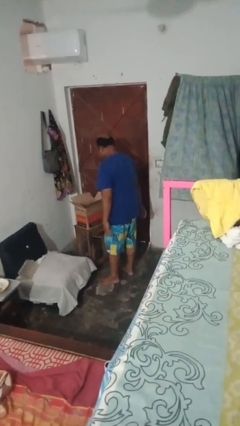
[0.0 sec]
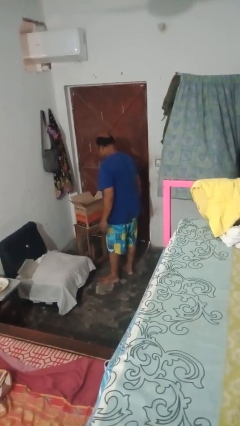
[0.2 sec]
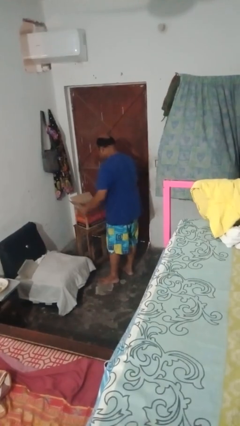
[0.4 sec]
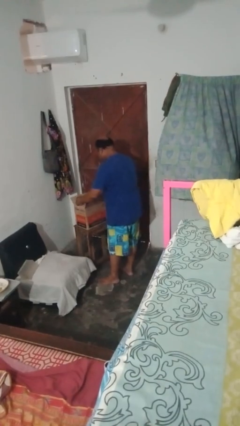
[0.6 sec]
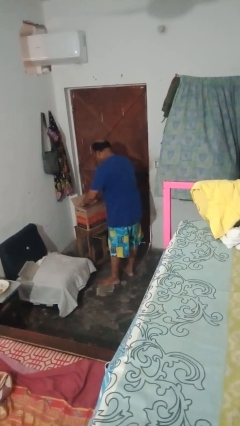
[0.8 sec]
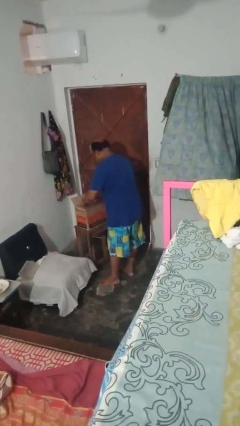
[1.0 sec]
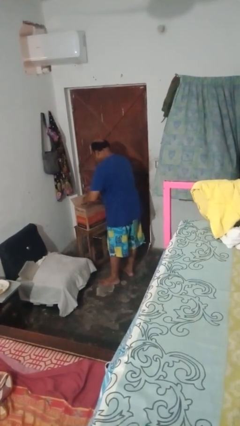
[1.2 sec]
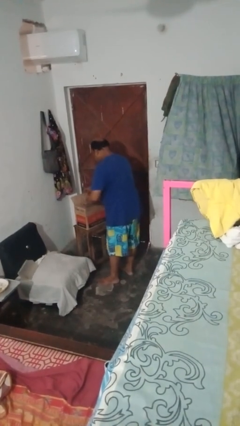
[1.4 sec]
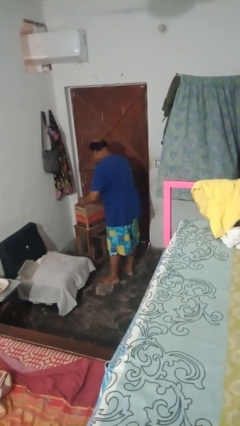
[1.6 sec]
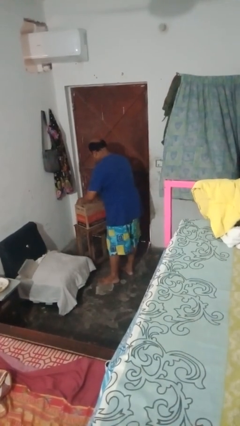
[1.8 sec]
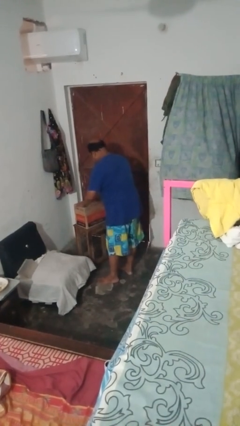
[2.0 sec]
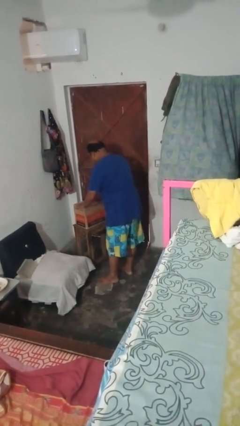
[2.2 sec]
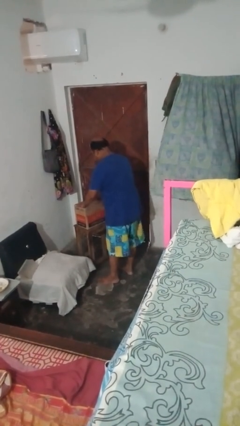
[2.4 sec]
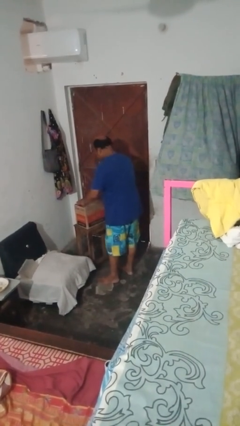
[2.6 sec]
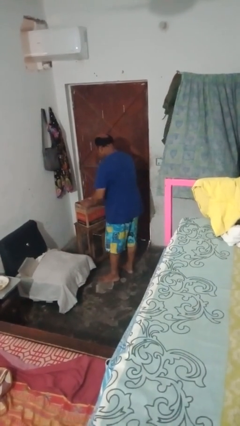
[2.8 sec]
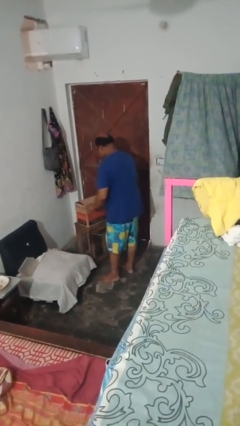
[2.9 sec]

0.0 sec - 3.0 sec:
person closes box

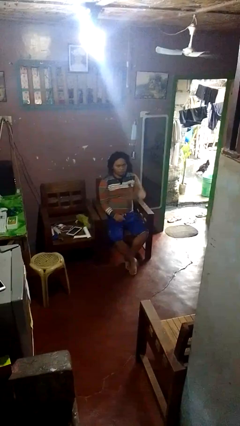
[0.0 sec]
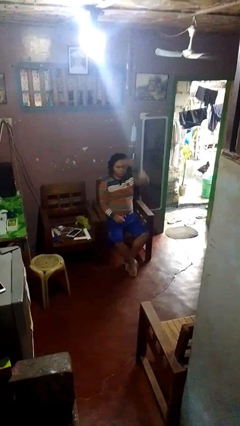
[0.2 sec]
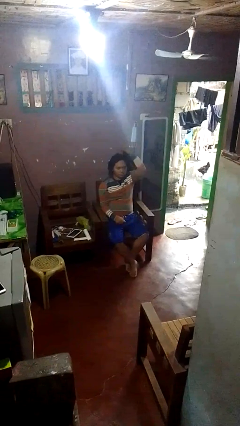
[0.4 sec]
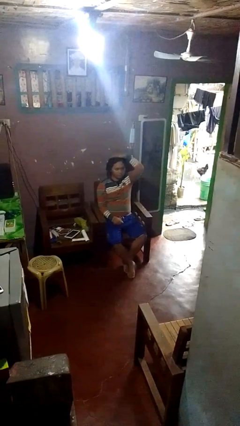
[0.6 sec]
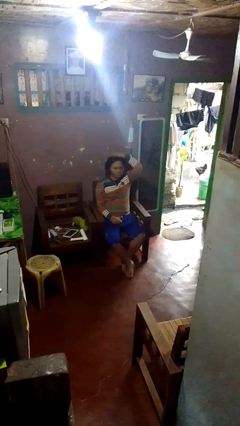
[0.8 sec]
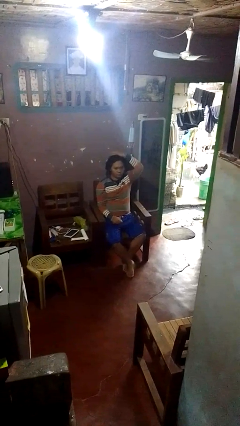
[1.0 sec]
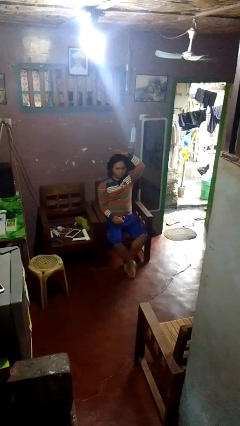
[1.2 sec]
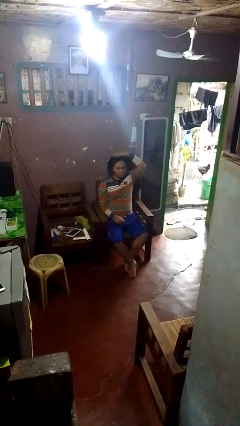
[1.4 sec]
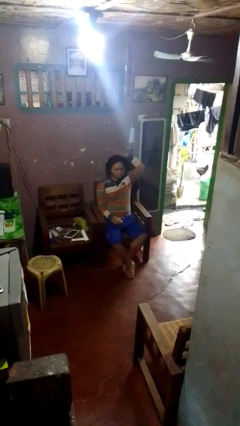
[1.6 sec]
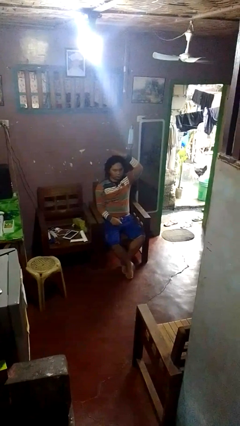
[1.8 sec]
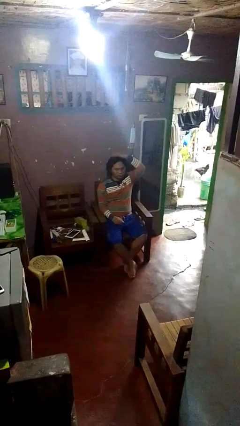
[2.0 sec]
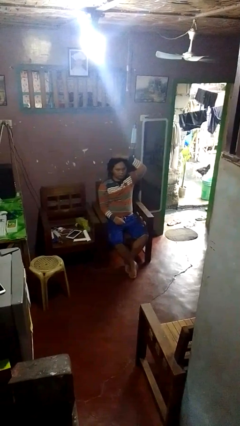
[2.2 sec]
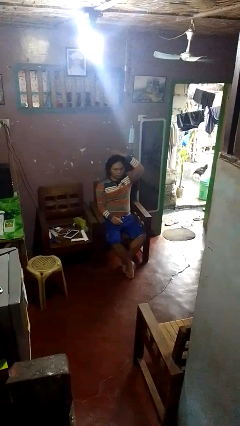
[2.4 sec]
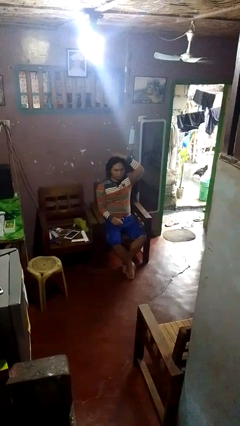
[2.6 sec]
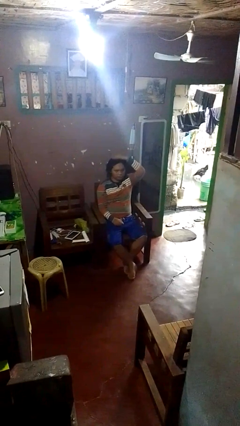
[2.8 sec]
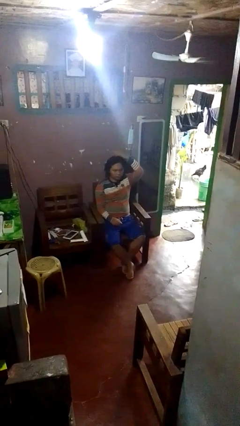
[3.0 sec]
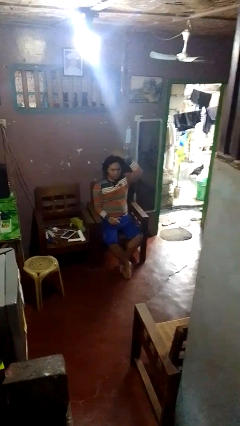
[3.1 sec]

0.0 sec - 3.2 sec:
person pats head

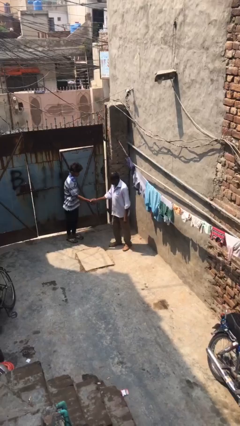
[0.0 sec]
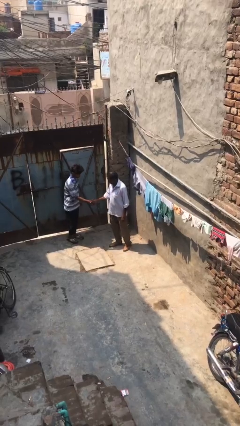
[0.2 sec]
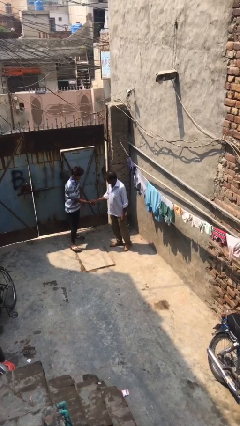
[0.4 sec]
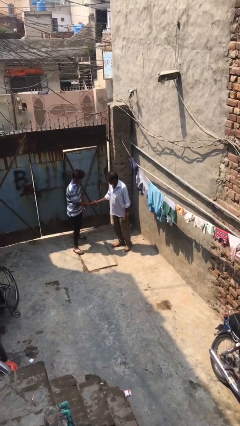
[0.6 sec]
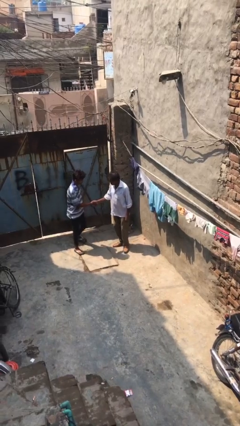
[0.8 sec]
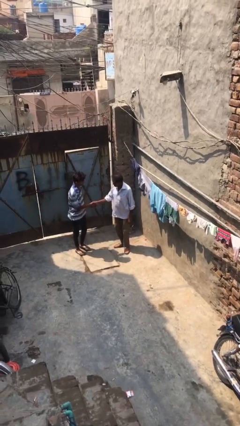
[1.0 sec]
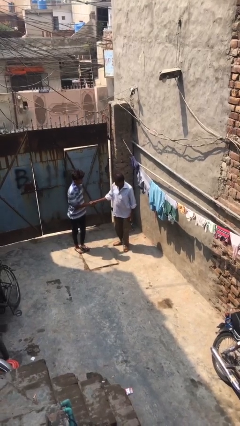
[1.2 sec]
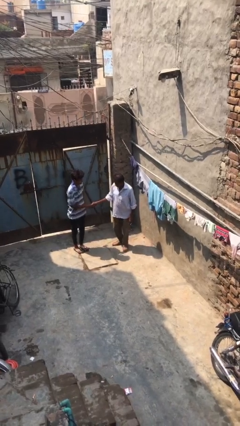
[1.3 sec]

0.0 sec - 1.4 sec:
person shakes hand

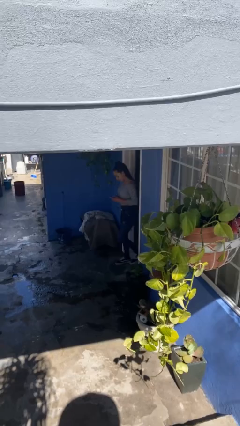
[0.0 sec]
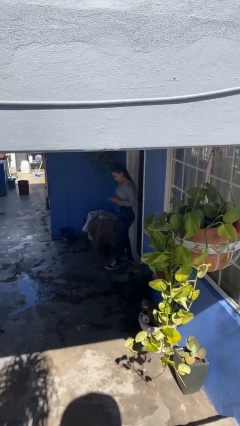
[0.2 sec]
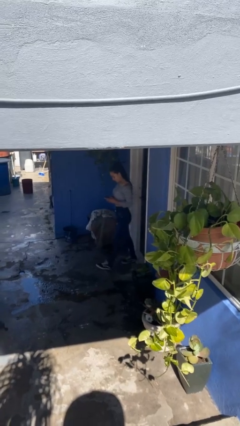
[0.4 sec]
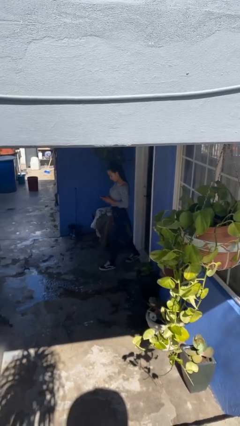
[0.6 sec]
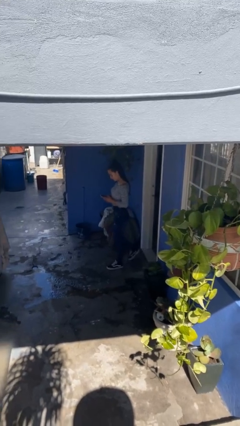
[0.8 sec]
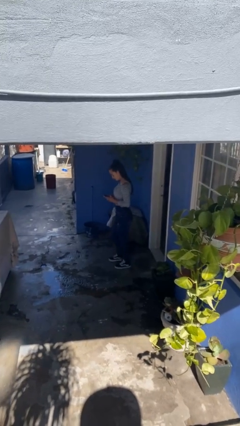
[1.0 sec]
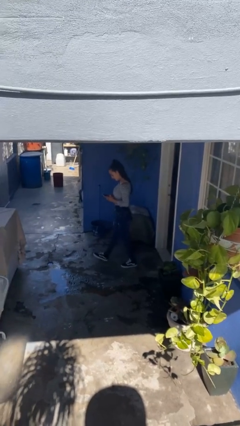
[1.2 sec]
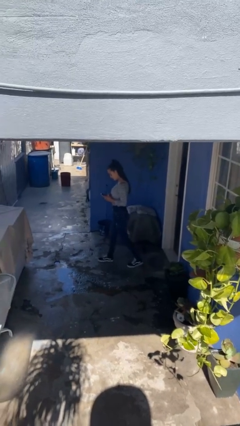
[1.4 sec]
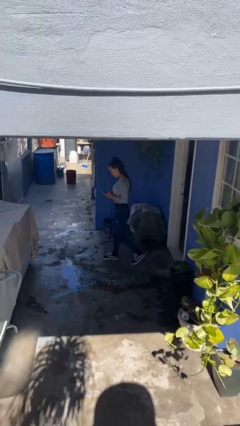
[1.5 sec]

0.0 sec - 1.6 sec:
person enters scene through structure

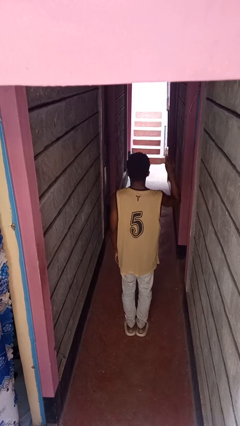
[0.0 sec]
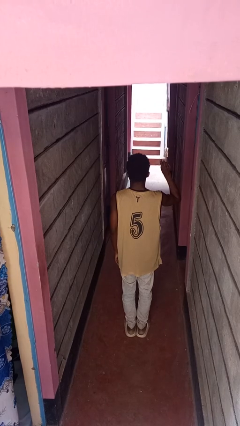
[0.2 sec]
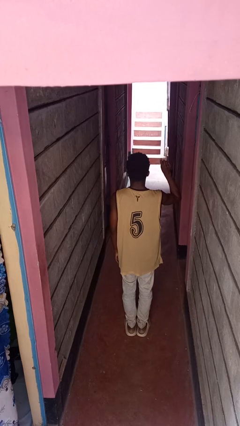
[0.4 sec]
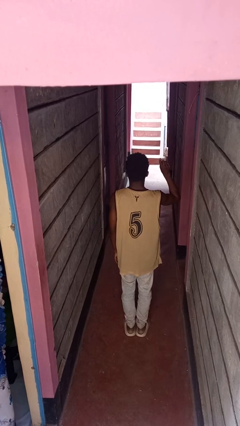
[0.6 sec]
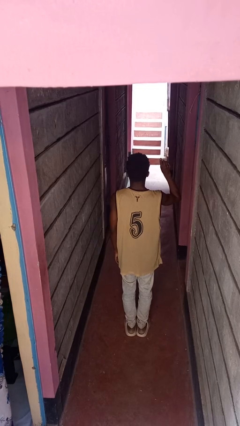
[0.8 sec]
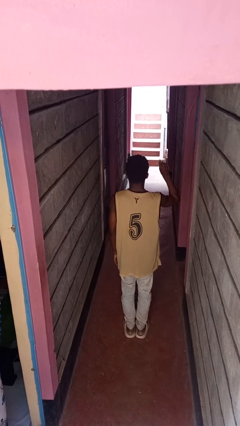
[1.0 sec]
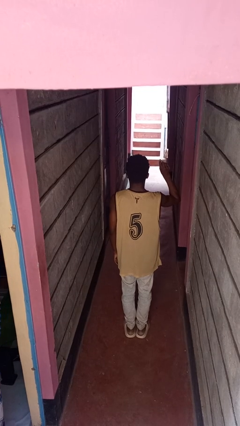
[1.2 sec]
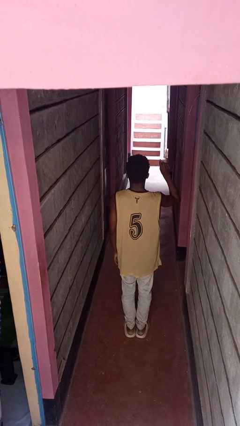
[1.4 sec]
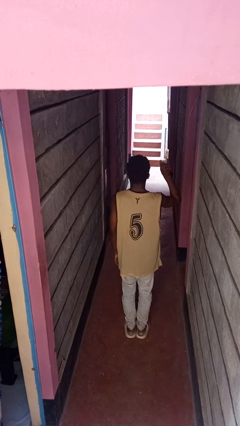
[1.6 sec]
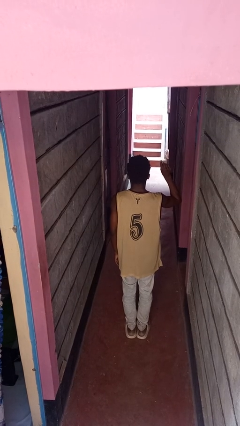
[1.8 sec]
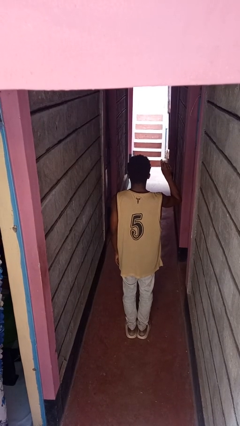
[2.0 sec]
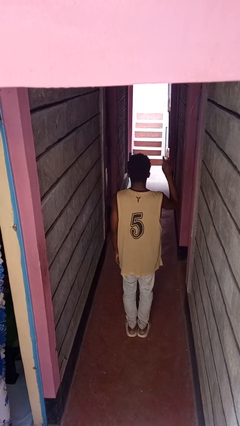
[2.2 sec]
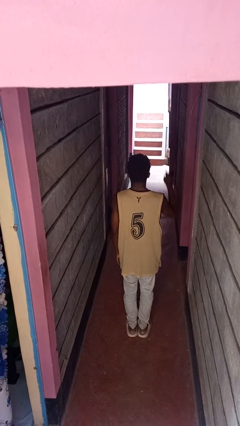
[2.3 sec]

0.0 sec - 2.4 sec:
person gestures number one

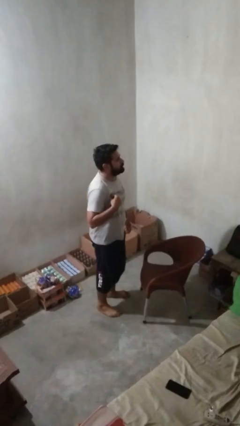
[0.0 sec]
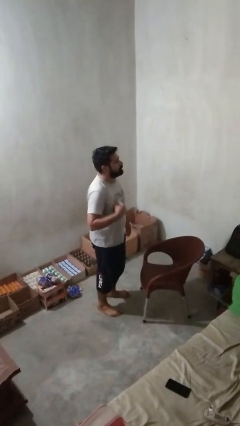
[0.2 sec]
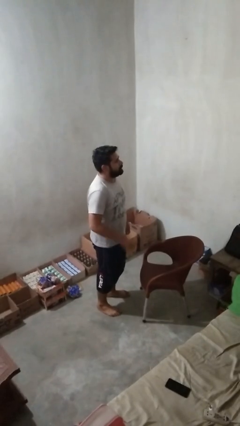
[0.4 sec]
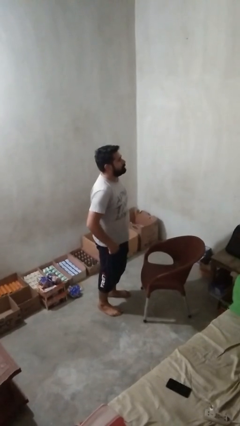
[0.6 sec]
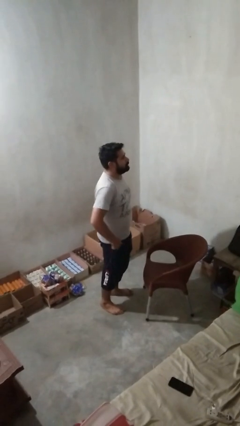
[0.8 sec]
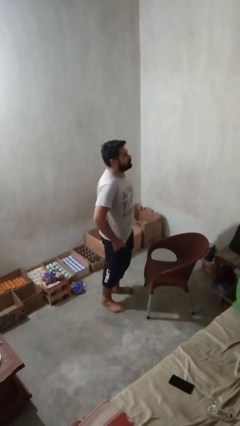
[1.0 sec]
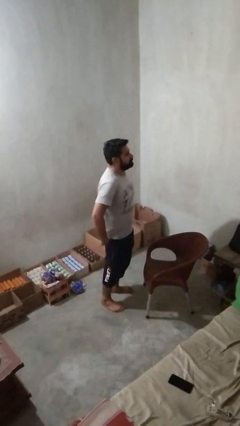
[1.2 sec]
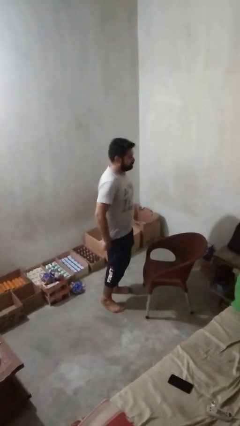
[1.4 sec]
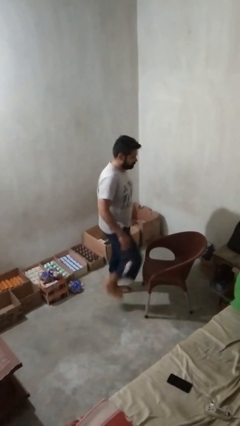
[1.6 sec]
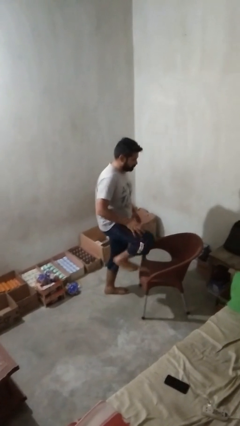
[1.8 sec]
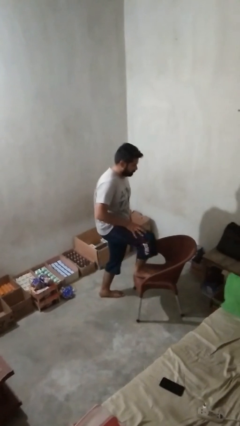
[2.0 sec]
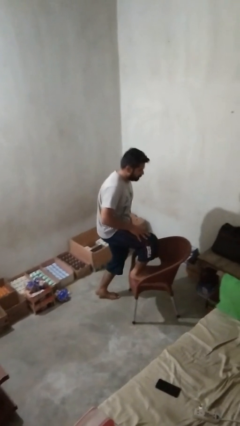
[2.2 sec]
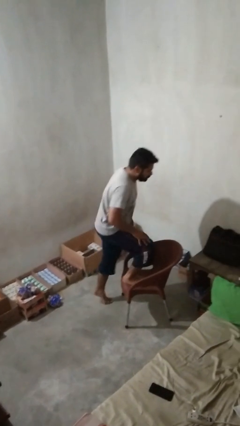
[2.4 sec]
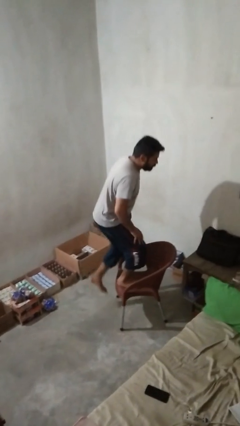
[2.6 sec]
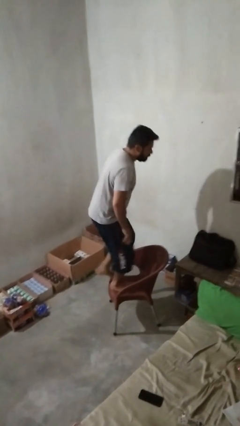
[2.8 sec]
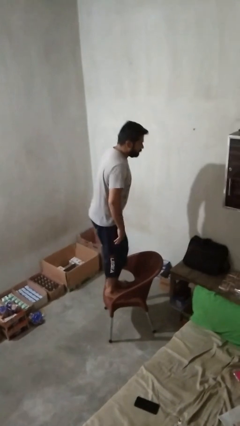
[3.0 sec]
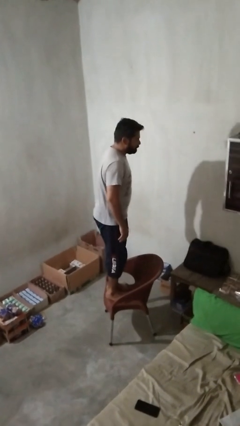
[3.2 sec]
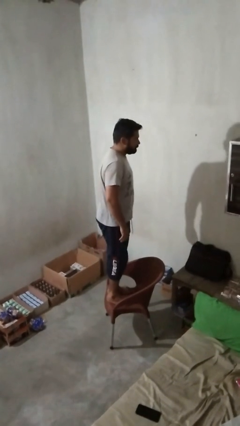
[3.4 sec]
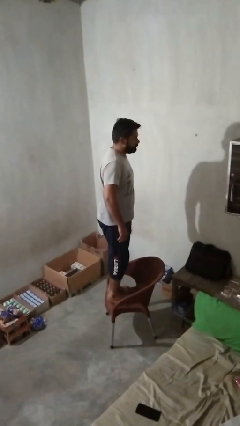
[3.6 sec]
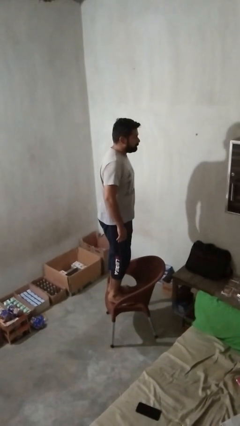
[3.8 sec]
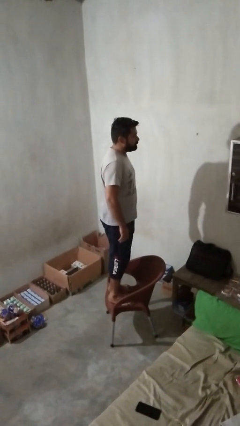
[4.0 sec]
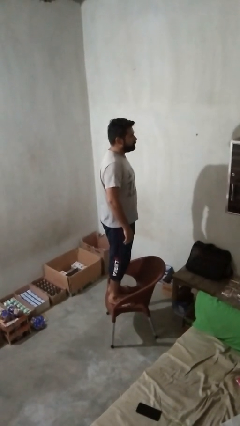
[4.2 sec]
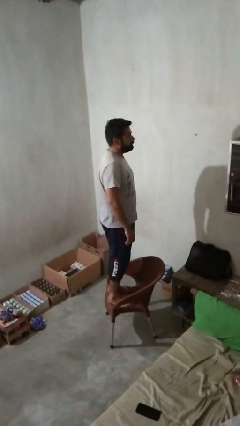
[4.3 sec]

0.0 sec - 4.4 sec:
person climbs on chair

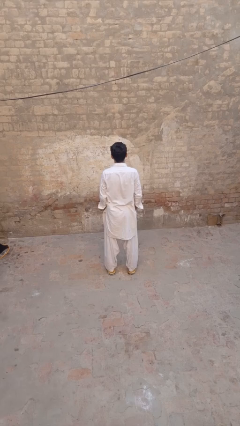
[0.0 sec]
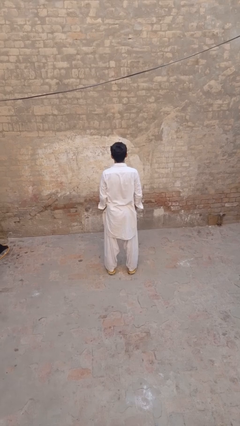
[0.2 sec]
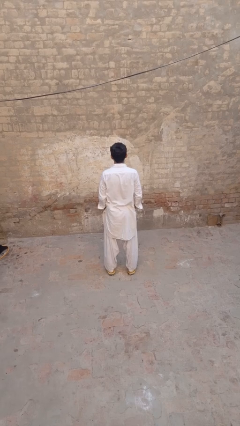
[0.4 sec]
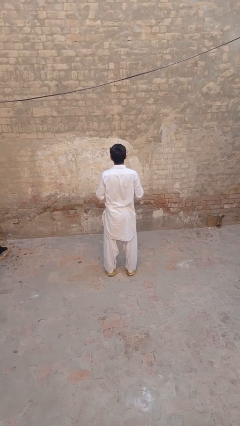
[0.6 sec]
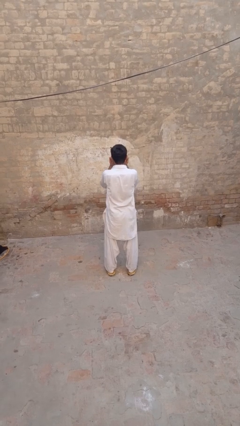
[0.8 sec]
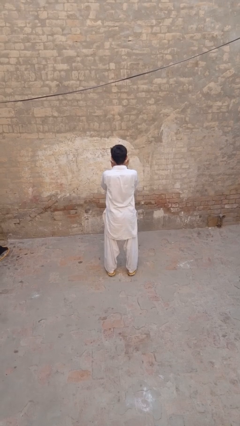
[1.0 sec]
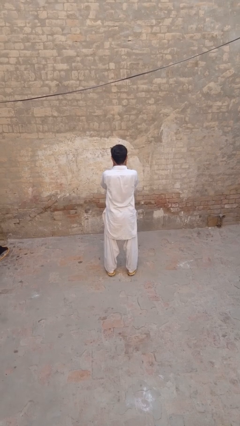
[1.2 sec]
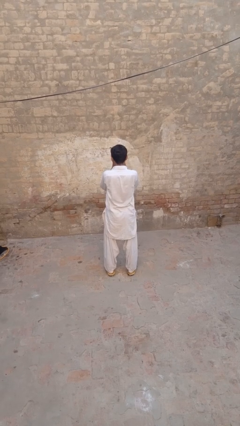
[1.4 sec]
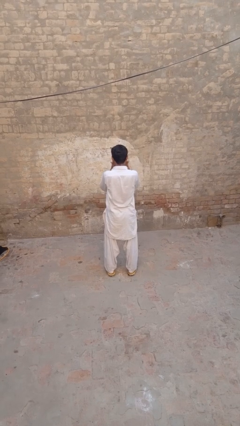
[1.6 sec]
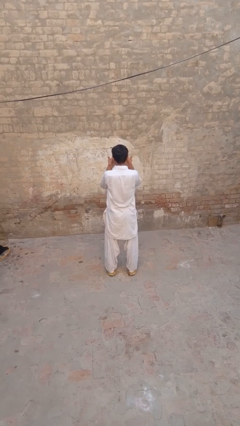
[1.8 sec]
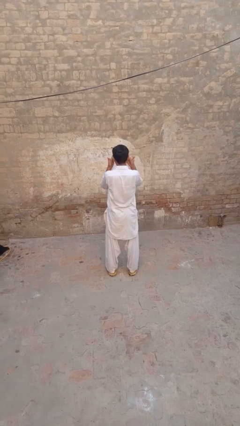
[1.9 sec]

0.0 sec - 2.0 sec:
person shades eyes
